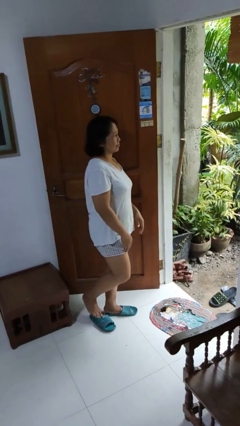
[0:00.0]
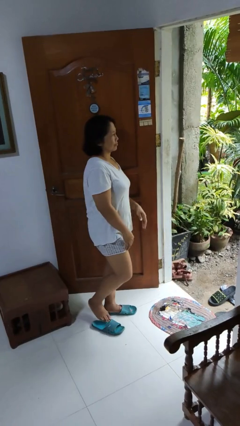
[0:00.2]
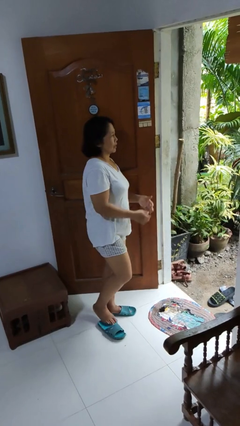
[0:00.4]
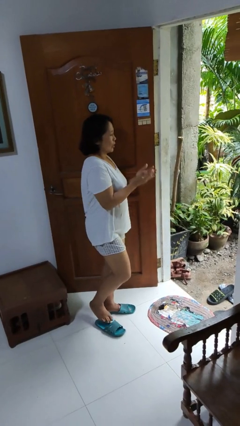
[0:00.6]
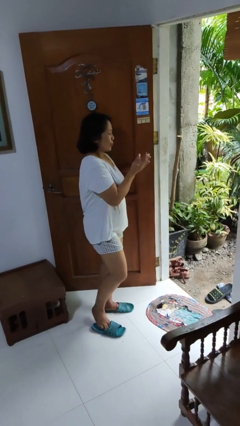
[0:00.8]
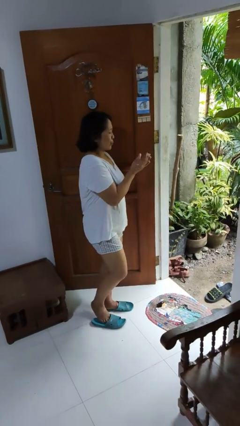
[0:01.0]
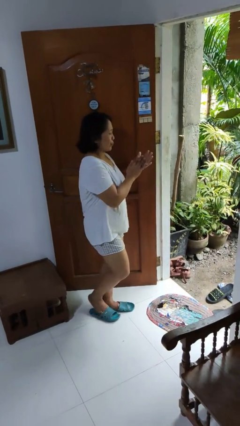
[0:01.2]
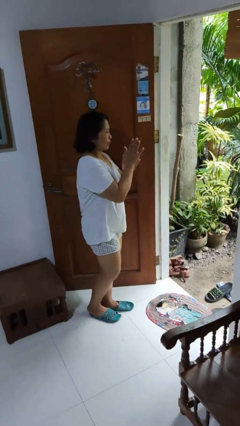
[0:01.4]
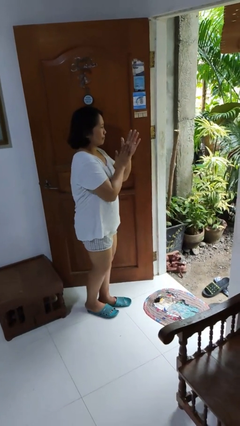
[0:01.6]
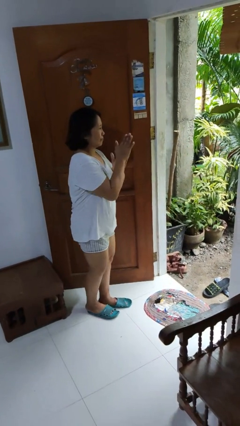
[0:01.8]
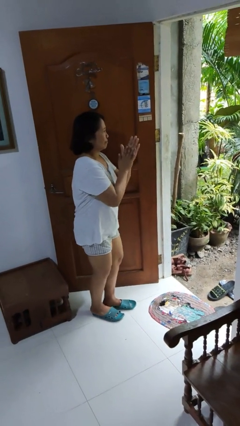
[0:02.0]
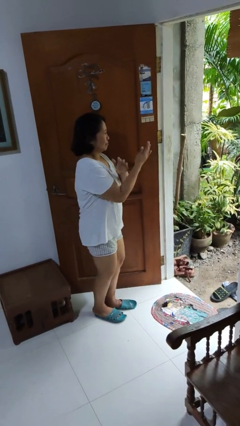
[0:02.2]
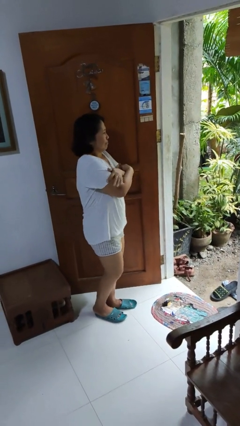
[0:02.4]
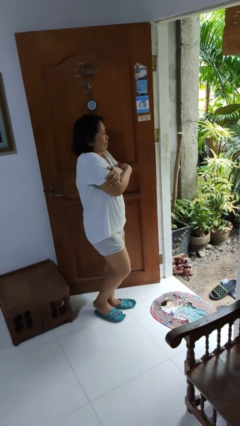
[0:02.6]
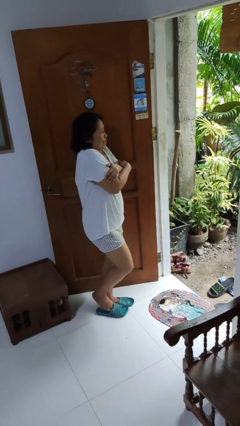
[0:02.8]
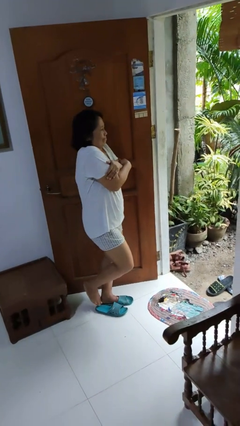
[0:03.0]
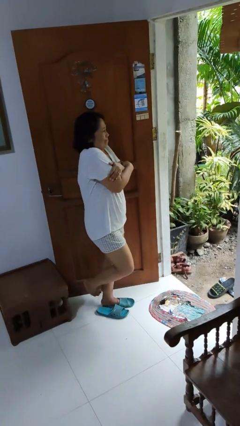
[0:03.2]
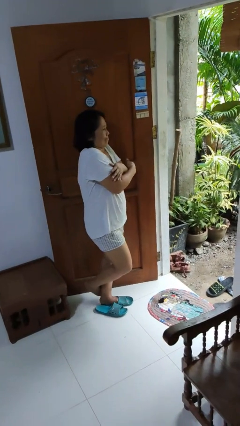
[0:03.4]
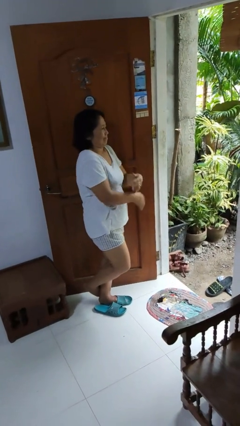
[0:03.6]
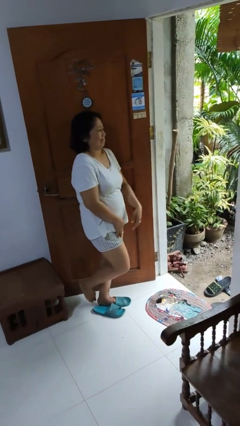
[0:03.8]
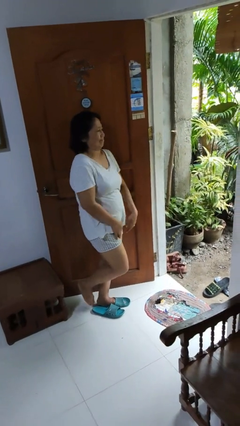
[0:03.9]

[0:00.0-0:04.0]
person blows into hands

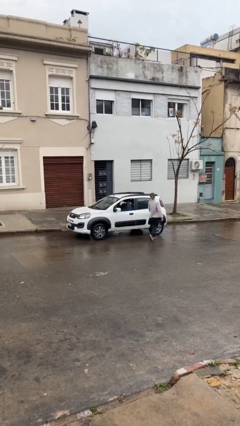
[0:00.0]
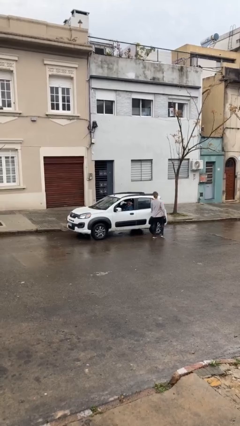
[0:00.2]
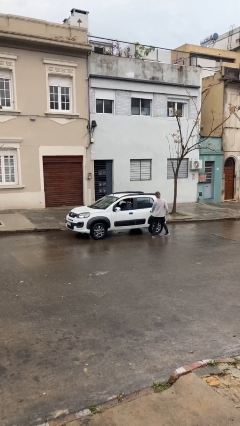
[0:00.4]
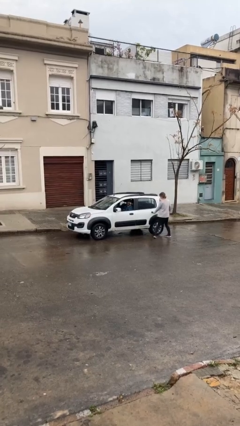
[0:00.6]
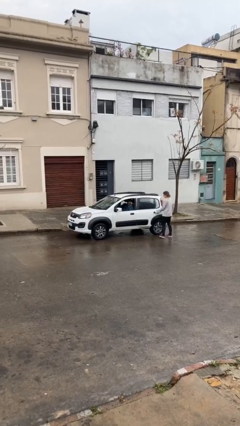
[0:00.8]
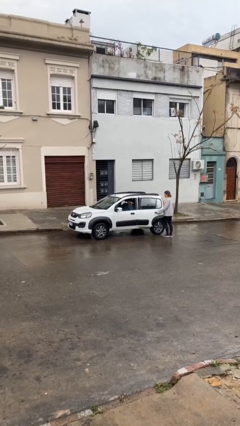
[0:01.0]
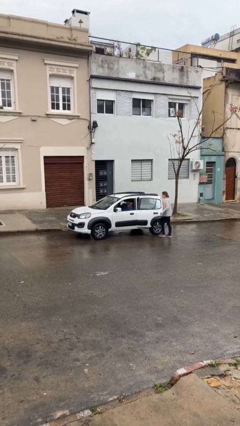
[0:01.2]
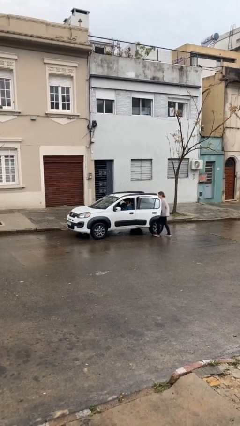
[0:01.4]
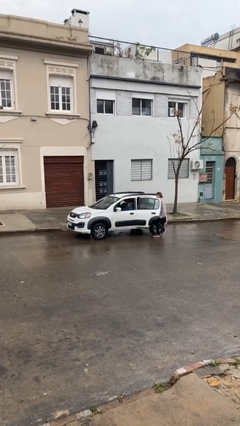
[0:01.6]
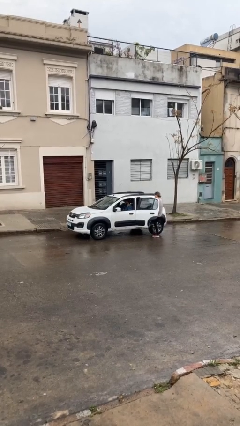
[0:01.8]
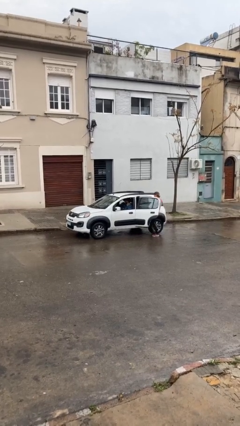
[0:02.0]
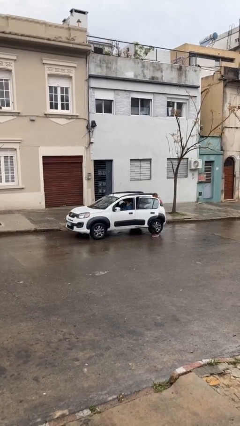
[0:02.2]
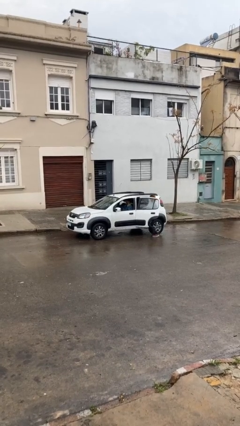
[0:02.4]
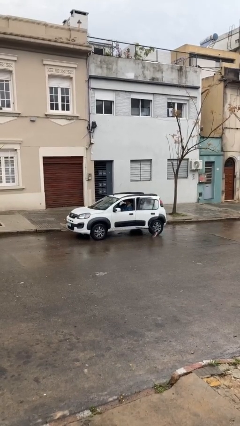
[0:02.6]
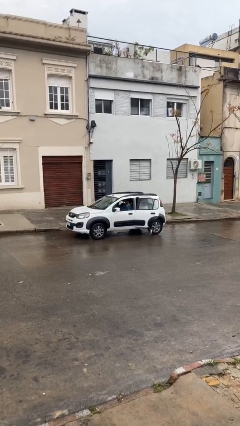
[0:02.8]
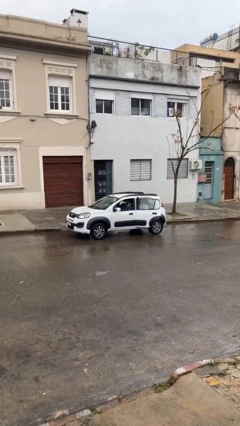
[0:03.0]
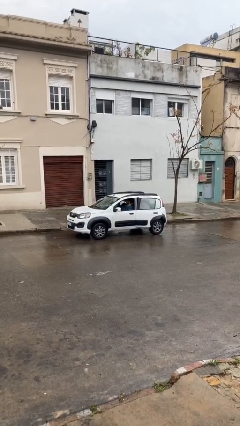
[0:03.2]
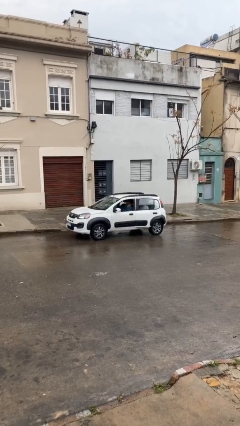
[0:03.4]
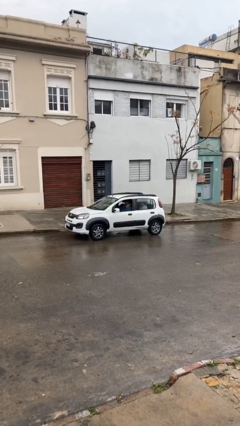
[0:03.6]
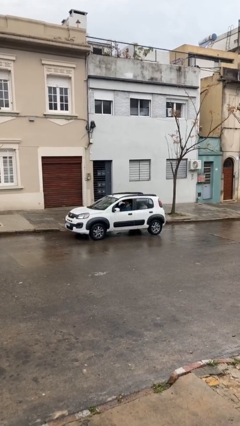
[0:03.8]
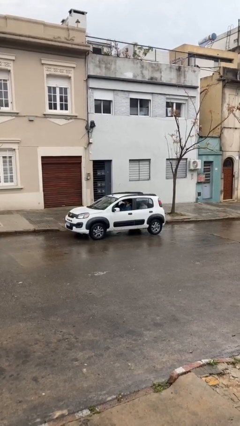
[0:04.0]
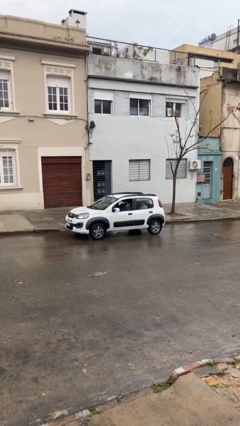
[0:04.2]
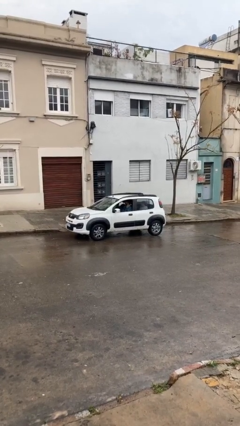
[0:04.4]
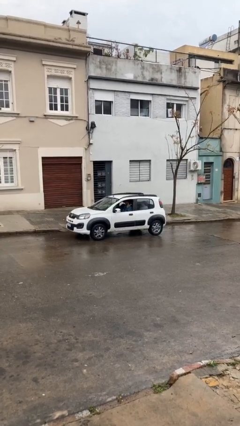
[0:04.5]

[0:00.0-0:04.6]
car picks up person

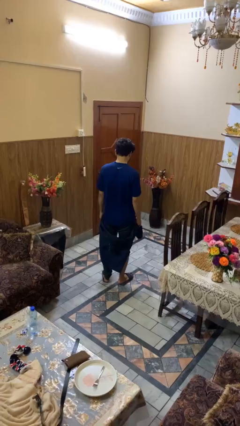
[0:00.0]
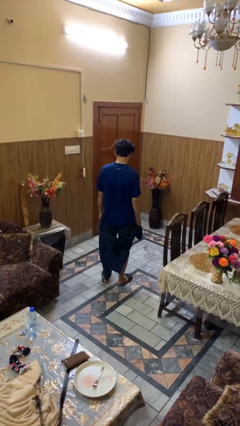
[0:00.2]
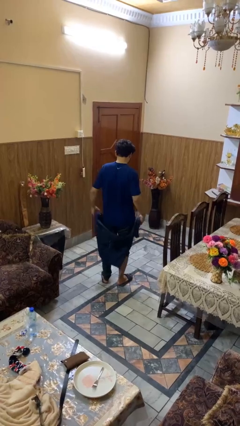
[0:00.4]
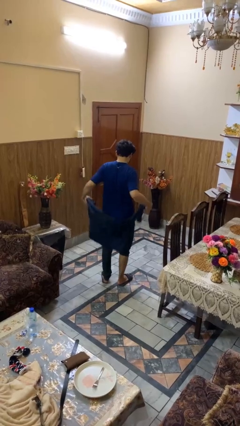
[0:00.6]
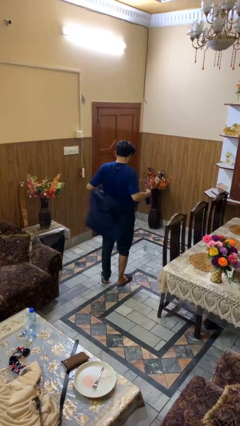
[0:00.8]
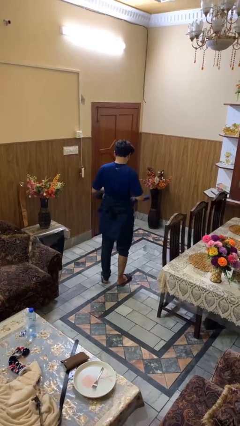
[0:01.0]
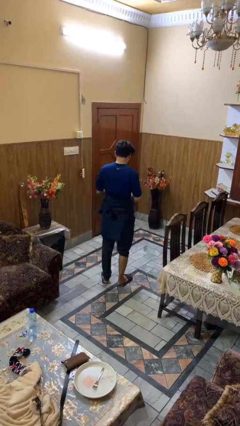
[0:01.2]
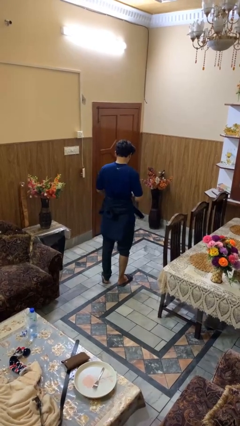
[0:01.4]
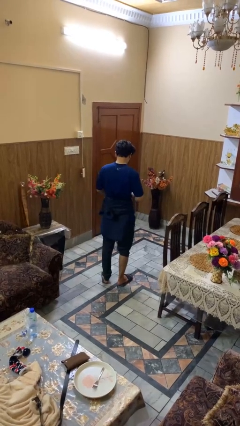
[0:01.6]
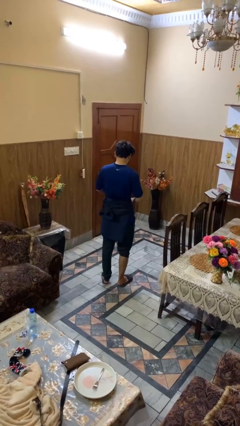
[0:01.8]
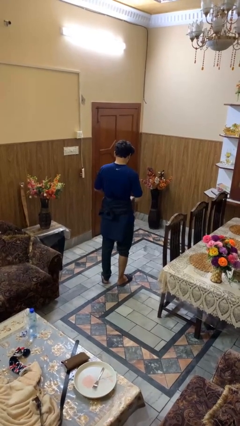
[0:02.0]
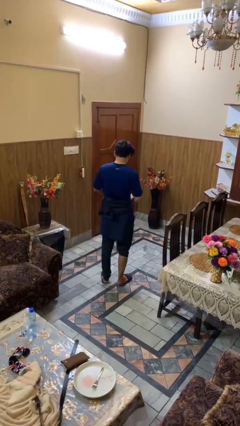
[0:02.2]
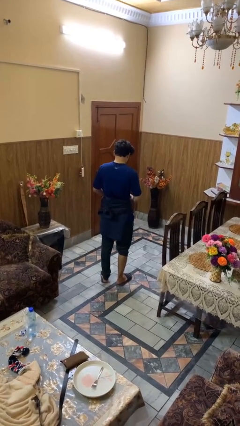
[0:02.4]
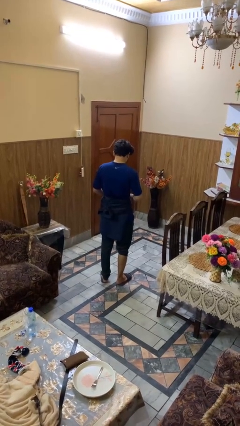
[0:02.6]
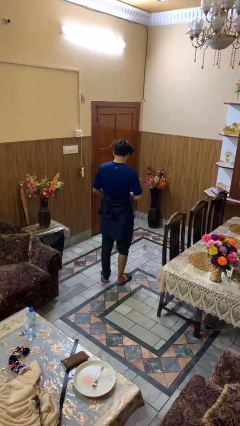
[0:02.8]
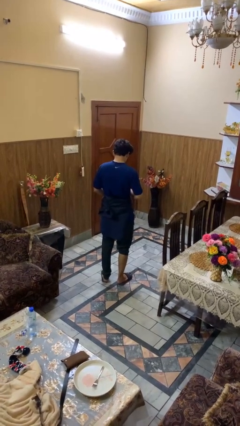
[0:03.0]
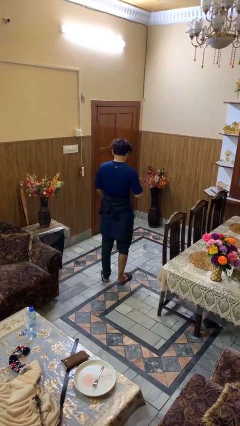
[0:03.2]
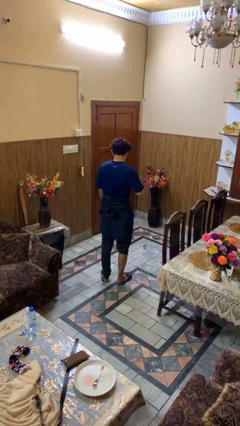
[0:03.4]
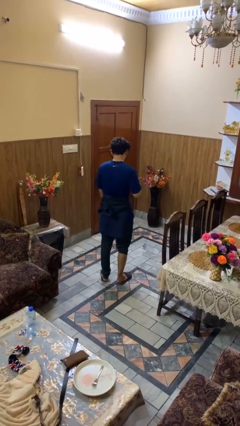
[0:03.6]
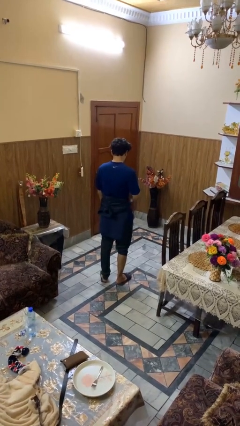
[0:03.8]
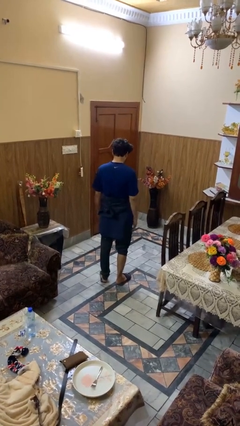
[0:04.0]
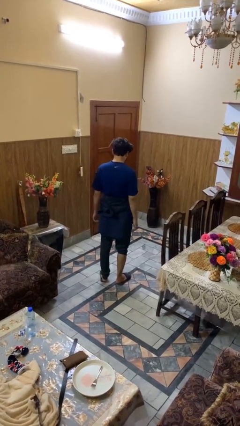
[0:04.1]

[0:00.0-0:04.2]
person ties jacket around waist

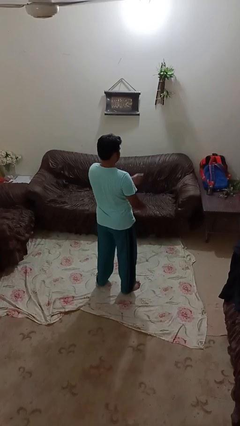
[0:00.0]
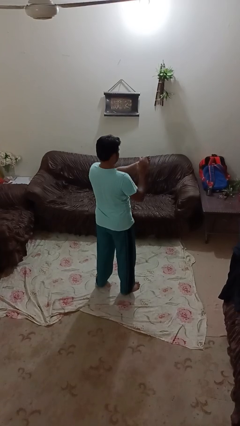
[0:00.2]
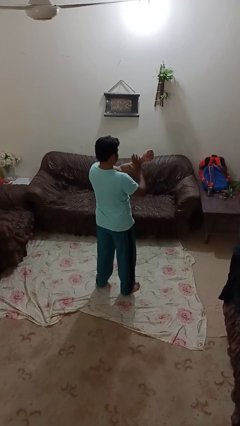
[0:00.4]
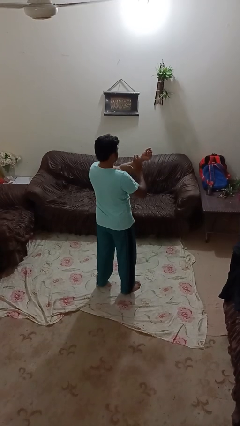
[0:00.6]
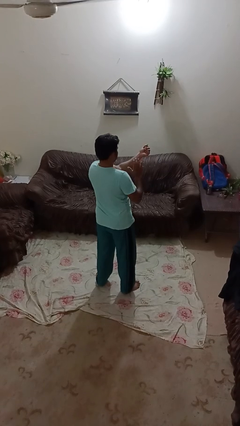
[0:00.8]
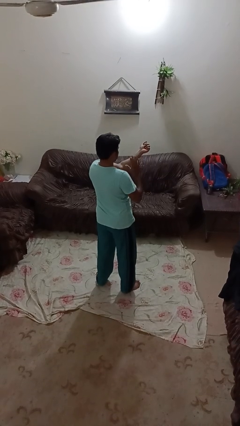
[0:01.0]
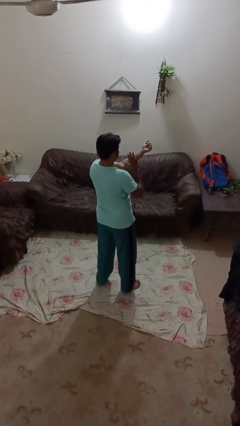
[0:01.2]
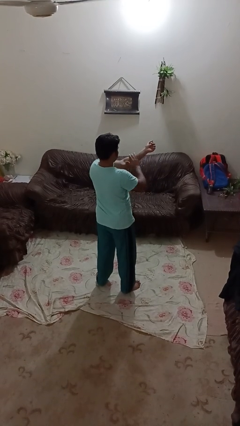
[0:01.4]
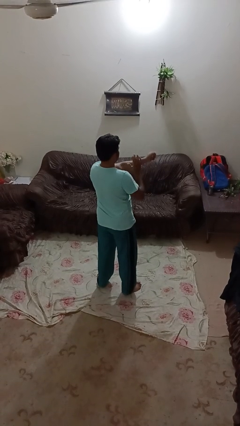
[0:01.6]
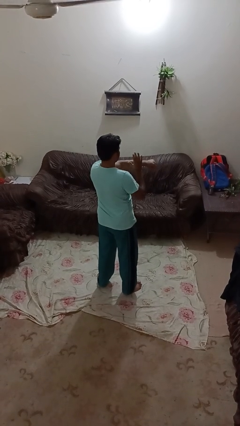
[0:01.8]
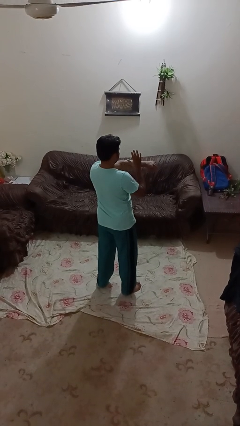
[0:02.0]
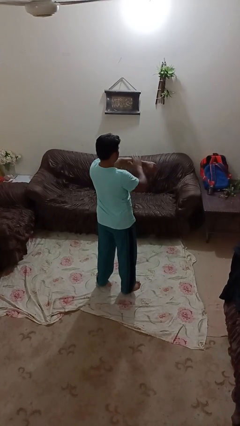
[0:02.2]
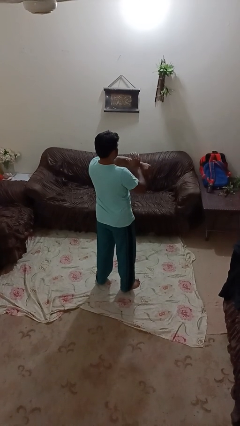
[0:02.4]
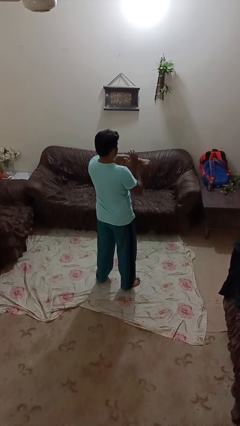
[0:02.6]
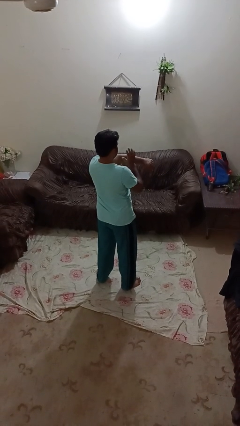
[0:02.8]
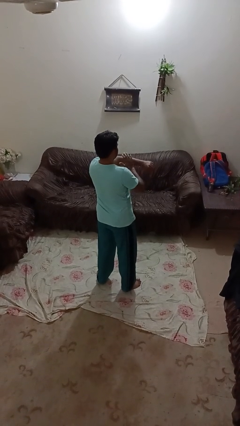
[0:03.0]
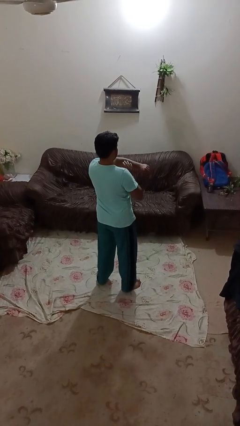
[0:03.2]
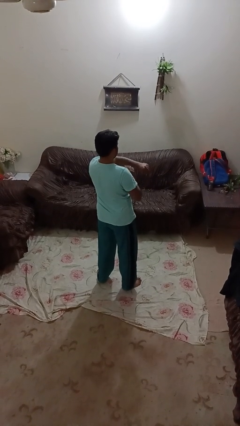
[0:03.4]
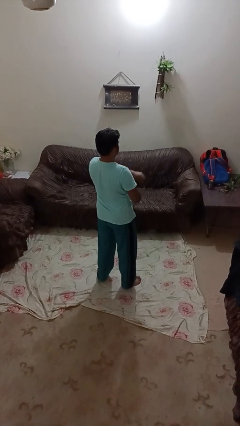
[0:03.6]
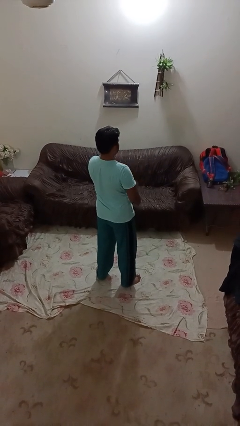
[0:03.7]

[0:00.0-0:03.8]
person swats bug

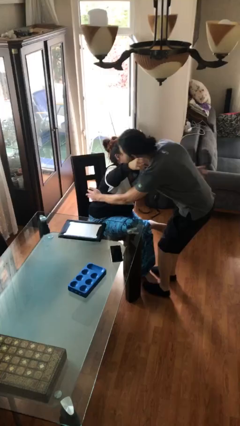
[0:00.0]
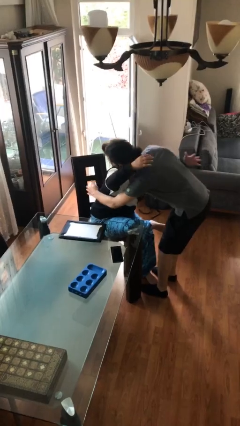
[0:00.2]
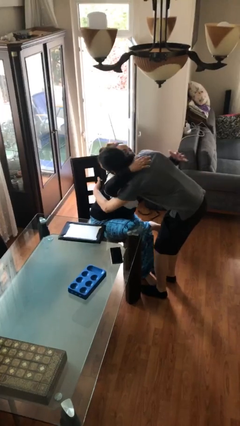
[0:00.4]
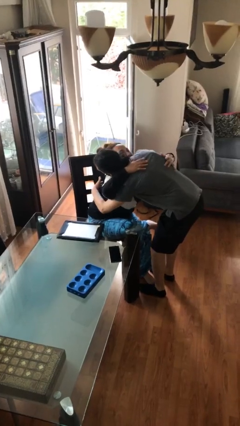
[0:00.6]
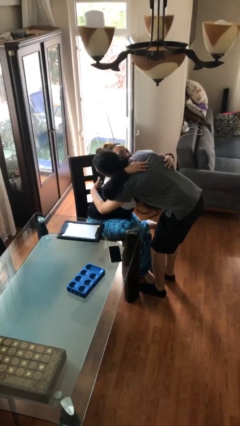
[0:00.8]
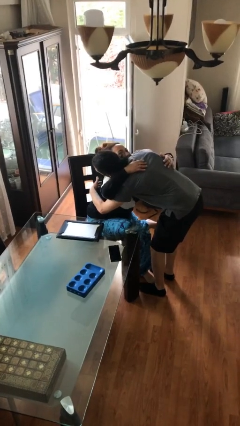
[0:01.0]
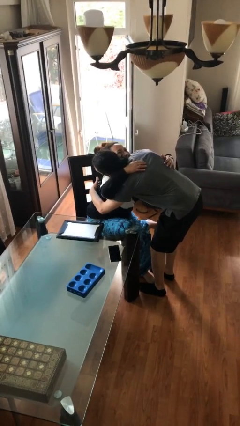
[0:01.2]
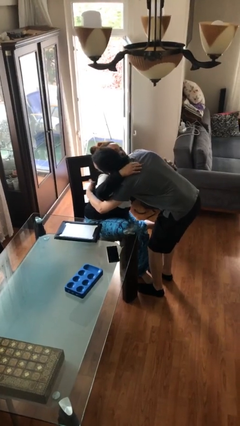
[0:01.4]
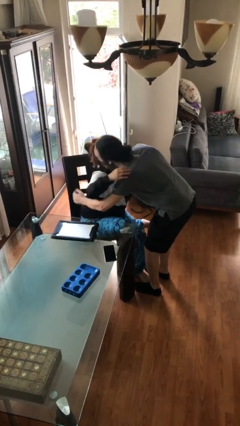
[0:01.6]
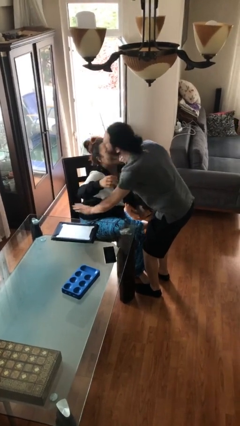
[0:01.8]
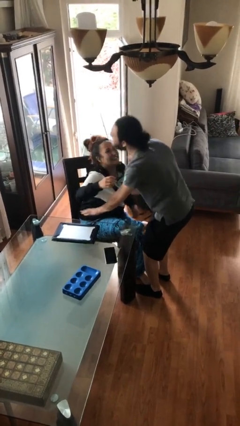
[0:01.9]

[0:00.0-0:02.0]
person embraces person
